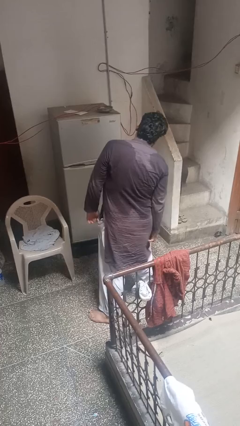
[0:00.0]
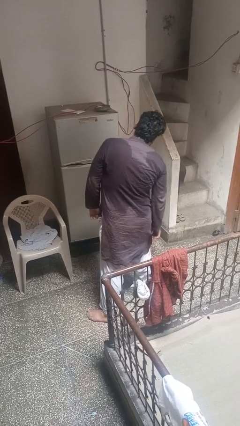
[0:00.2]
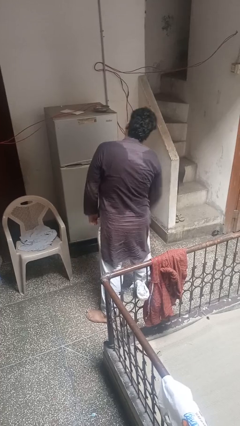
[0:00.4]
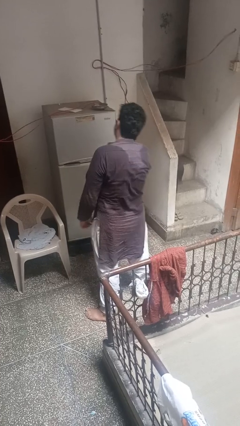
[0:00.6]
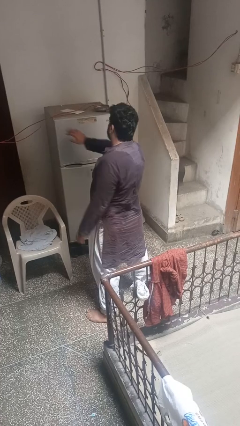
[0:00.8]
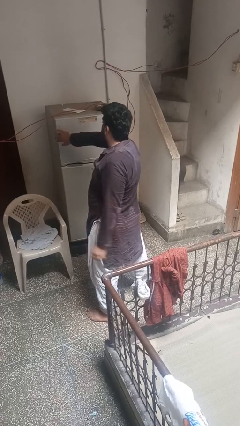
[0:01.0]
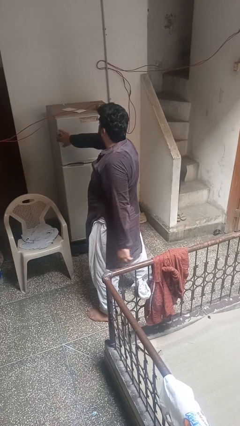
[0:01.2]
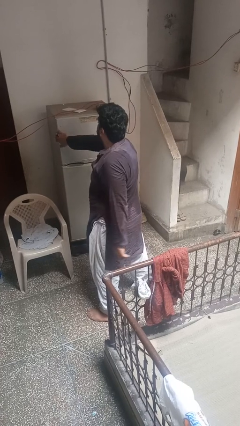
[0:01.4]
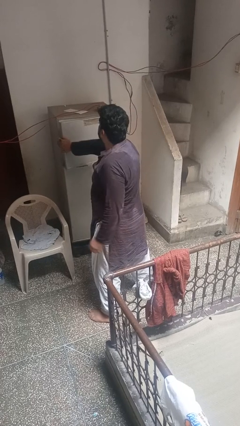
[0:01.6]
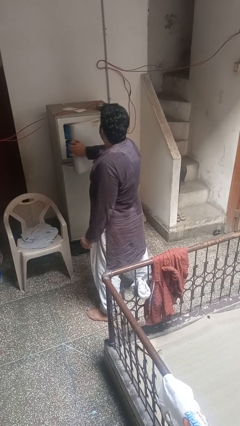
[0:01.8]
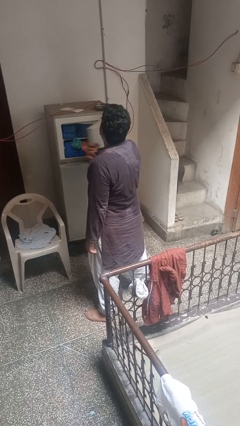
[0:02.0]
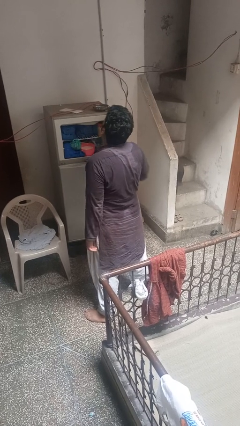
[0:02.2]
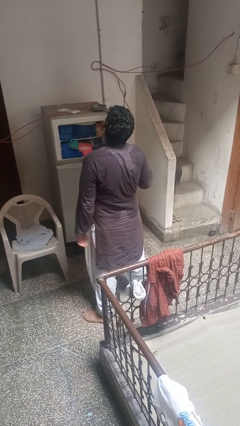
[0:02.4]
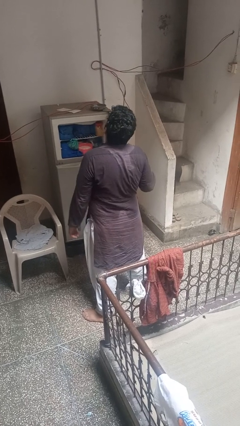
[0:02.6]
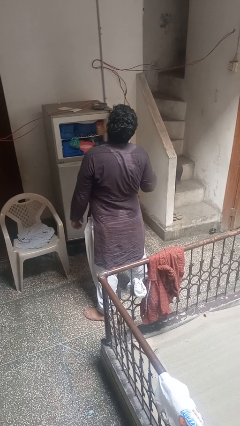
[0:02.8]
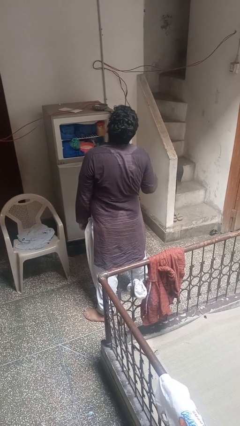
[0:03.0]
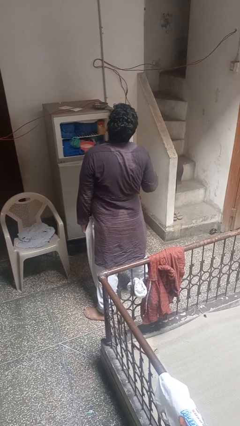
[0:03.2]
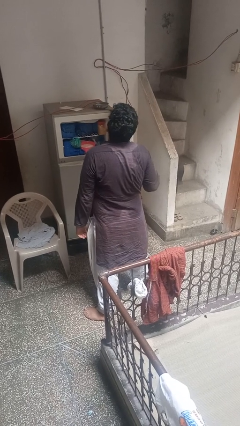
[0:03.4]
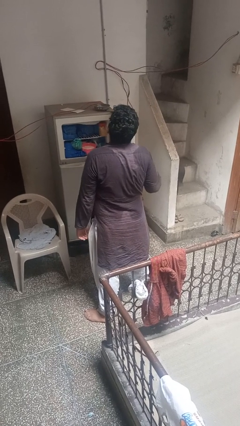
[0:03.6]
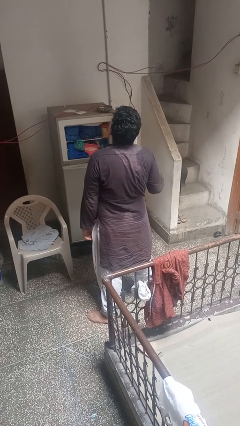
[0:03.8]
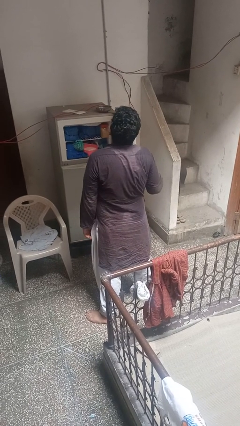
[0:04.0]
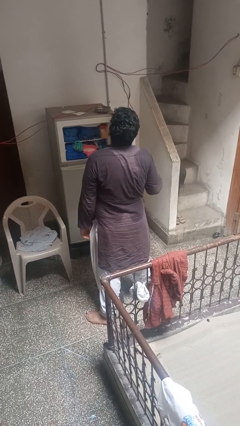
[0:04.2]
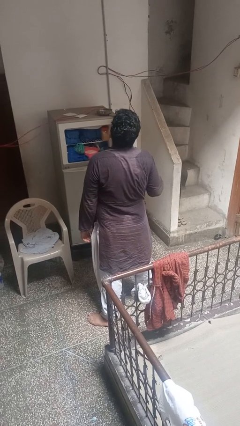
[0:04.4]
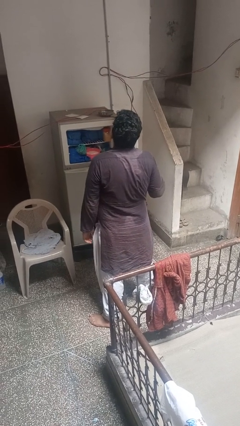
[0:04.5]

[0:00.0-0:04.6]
person opens refrigerator

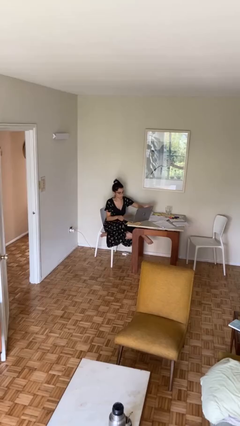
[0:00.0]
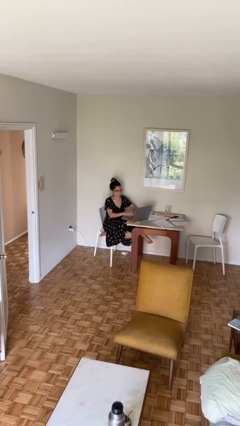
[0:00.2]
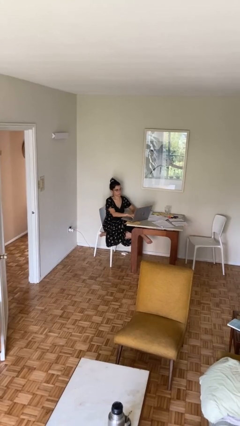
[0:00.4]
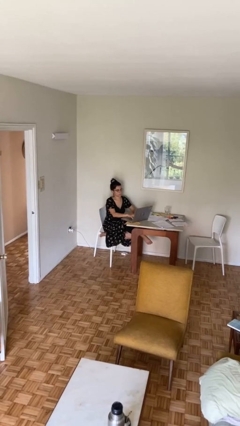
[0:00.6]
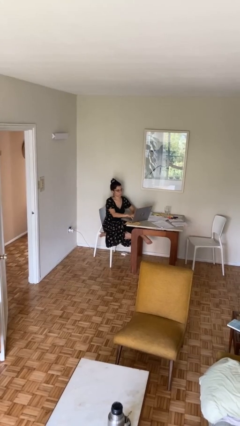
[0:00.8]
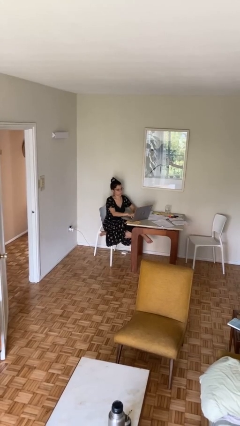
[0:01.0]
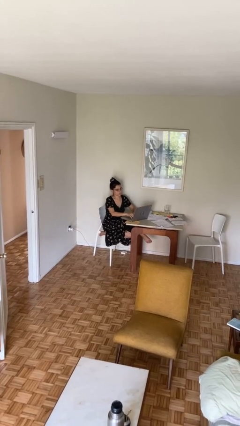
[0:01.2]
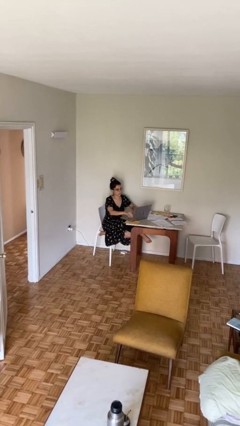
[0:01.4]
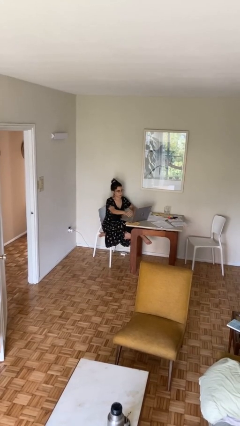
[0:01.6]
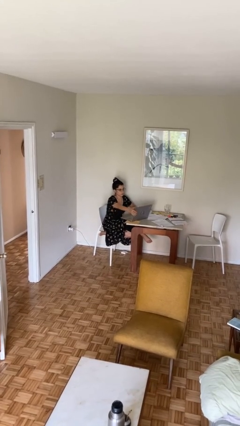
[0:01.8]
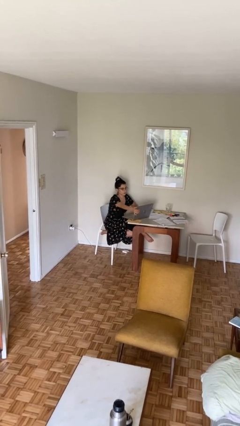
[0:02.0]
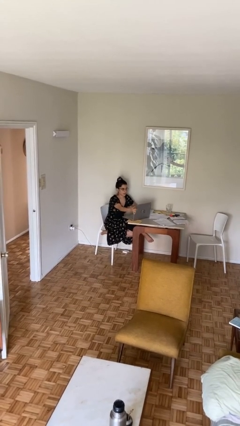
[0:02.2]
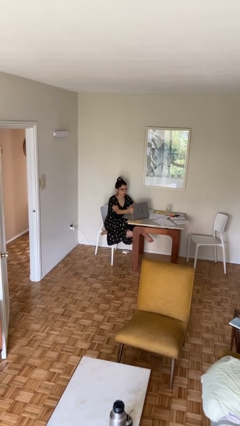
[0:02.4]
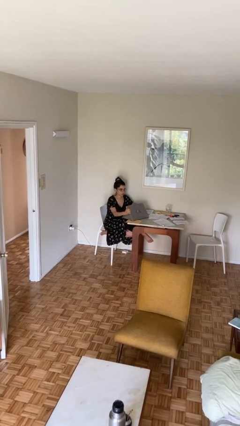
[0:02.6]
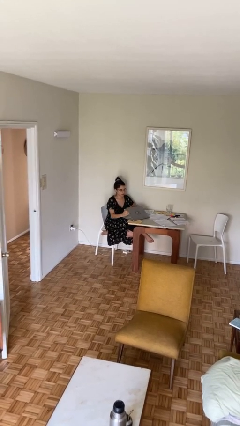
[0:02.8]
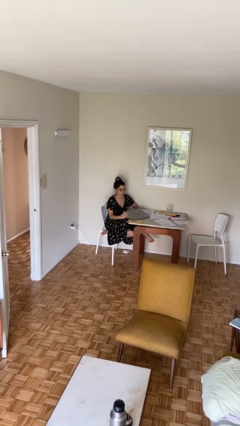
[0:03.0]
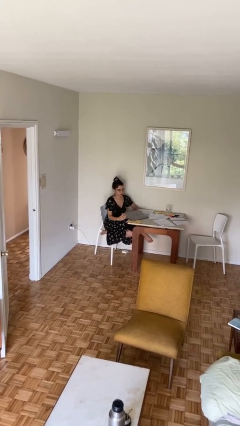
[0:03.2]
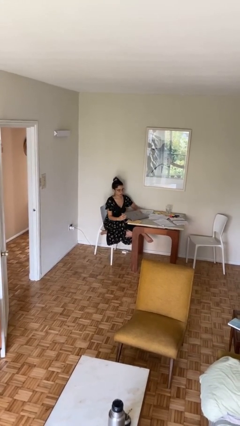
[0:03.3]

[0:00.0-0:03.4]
person interacts with laptop

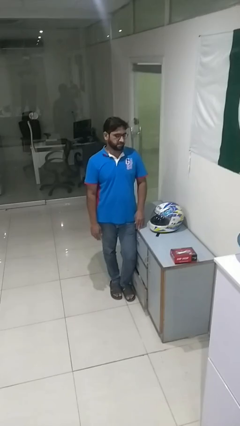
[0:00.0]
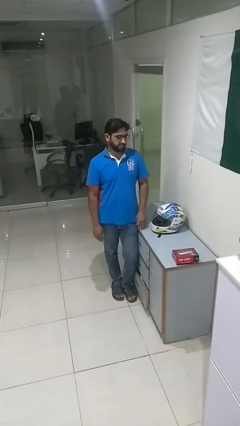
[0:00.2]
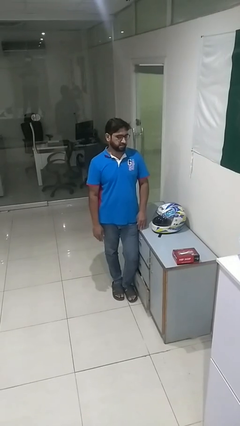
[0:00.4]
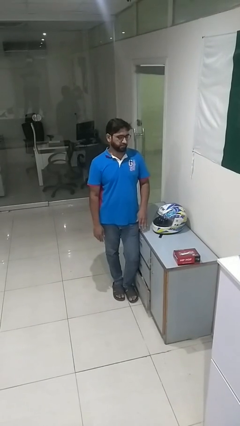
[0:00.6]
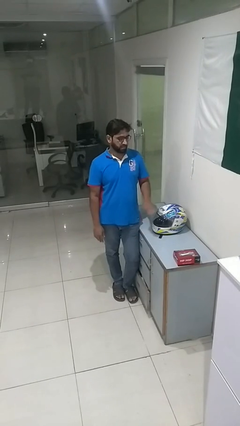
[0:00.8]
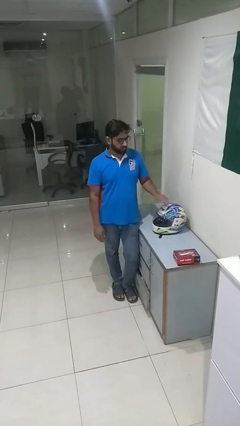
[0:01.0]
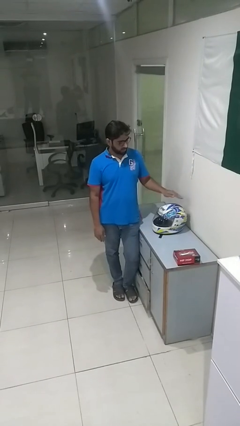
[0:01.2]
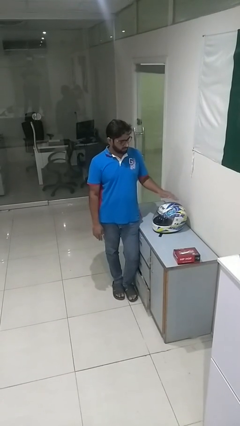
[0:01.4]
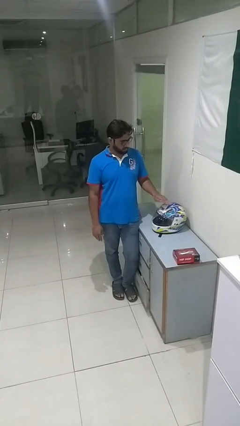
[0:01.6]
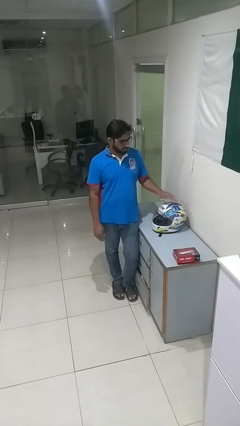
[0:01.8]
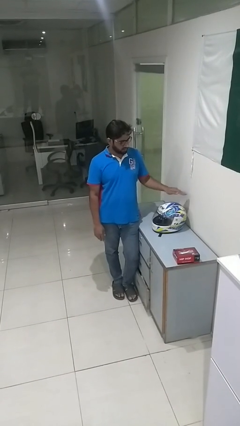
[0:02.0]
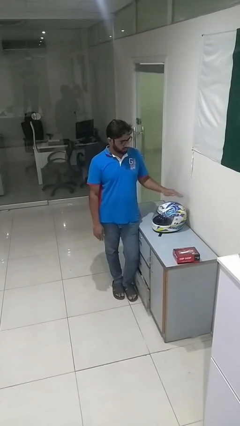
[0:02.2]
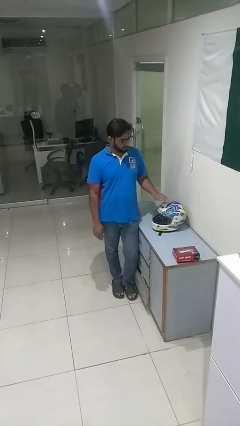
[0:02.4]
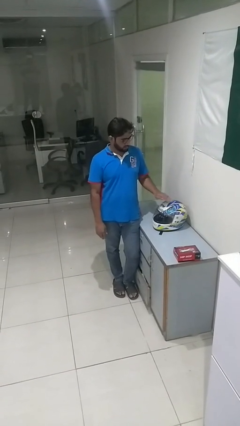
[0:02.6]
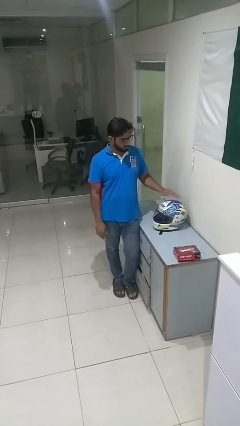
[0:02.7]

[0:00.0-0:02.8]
person waves hand over object

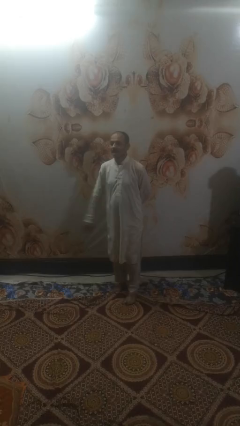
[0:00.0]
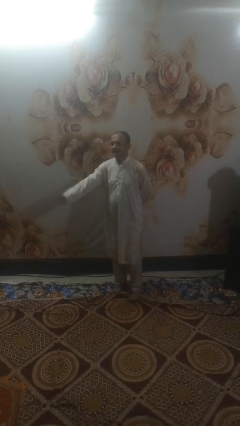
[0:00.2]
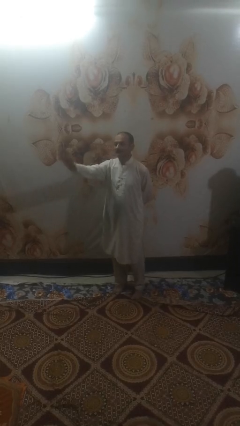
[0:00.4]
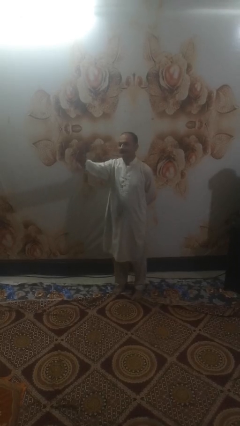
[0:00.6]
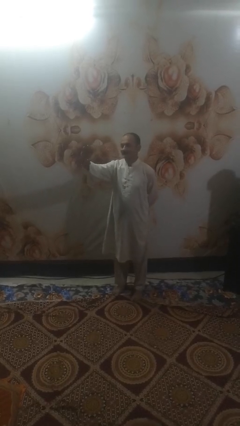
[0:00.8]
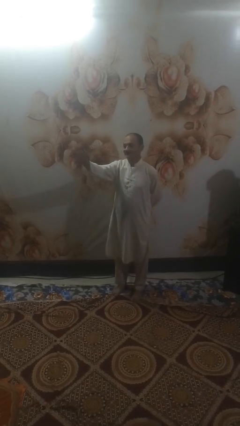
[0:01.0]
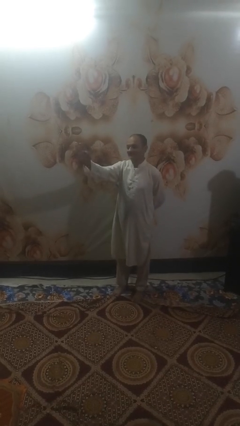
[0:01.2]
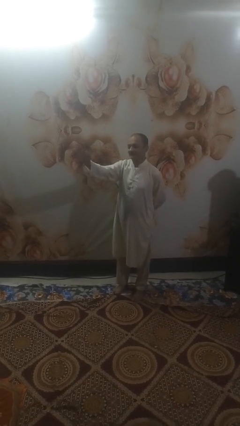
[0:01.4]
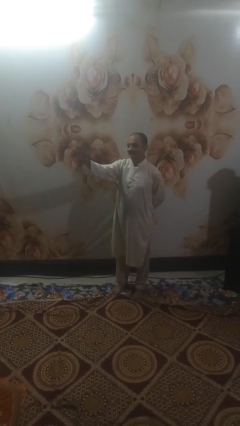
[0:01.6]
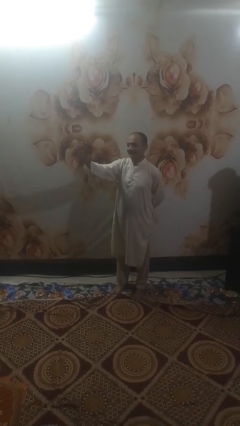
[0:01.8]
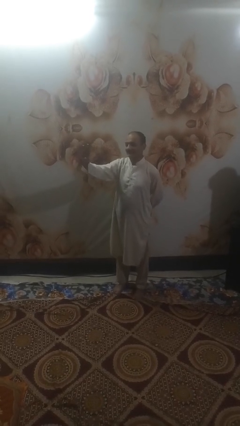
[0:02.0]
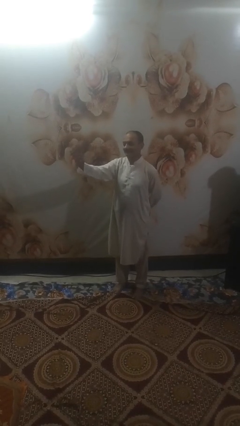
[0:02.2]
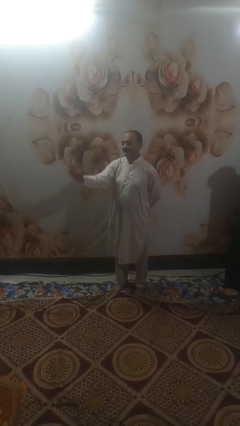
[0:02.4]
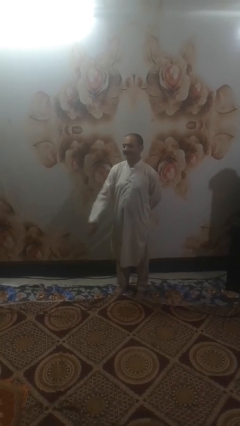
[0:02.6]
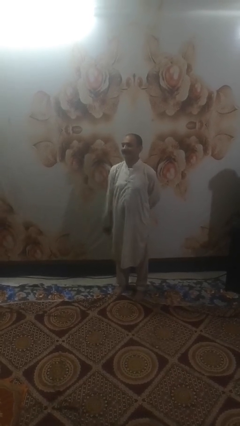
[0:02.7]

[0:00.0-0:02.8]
person waves at person

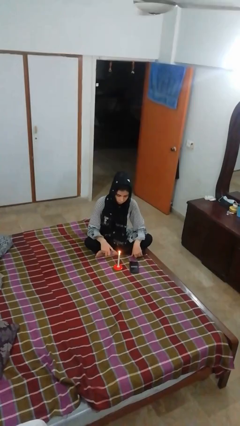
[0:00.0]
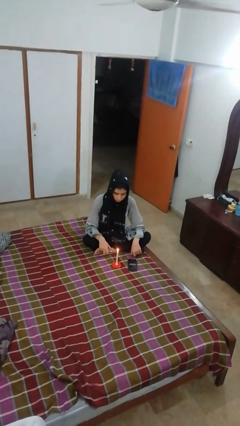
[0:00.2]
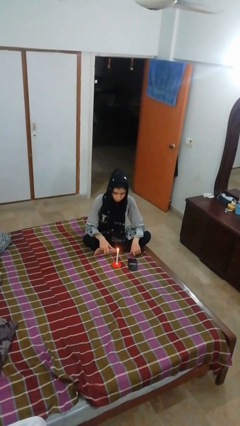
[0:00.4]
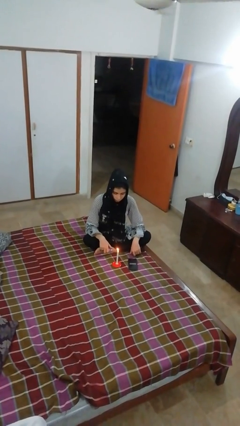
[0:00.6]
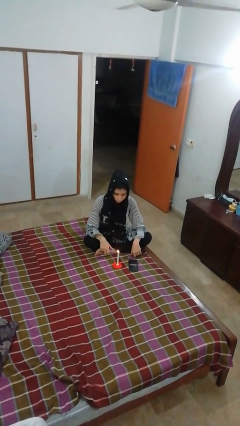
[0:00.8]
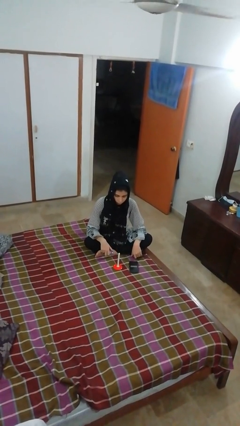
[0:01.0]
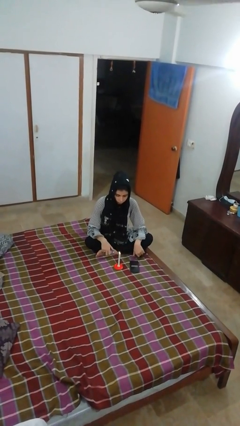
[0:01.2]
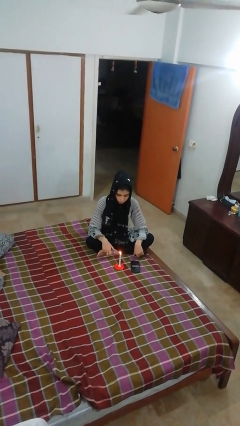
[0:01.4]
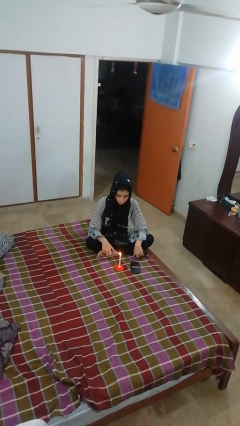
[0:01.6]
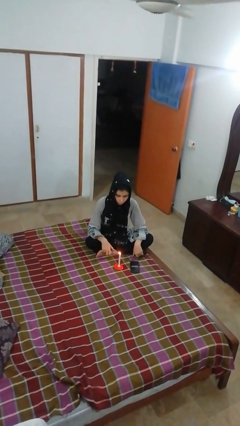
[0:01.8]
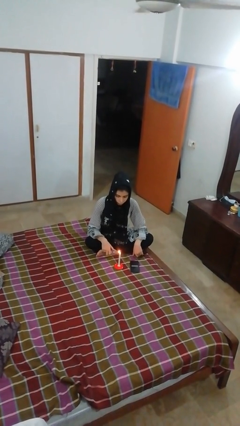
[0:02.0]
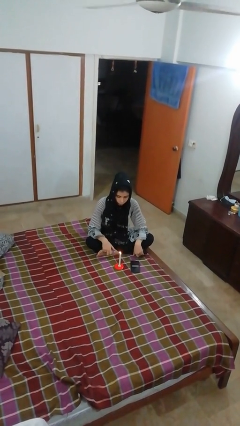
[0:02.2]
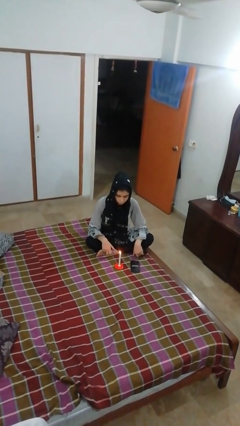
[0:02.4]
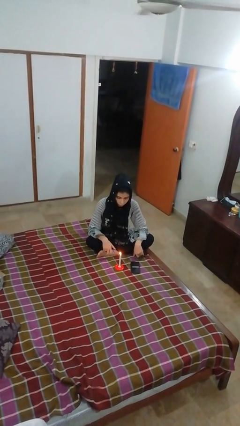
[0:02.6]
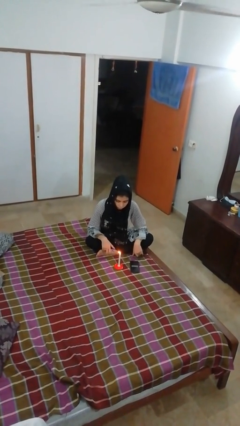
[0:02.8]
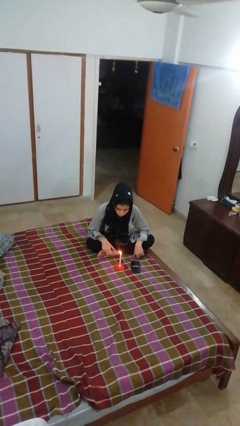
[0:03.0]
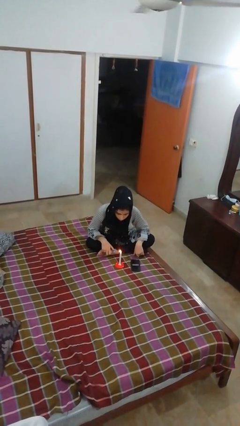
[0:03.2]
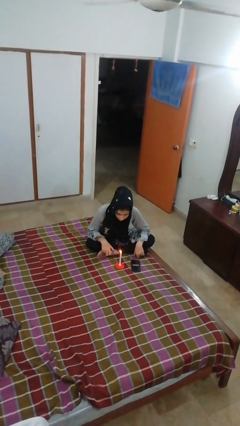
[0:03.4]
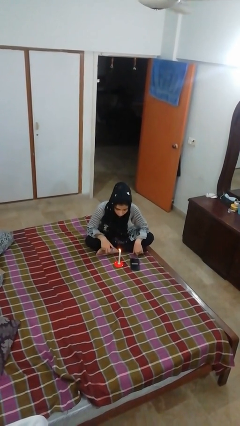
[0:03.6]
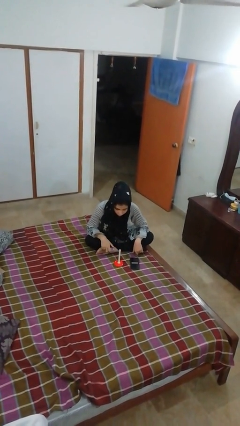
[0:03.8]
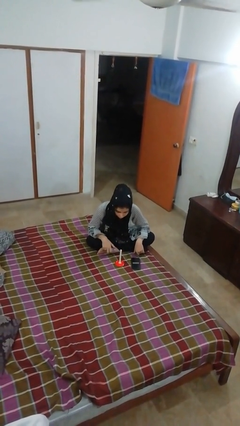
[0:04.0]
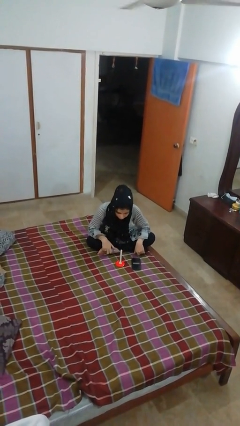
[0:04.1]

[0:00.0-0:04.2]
person extinguishes candle

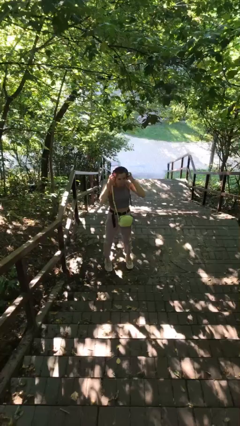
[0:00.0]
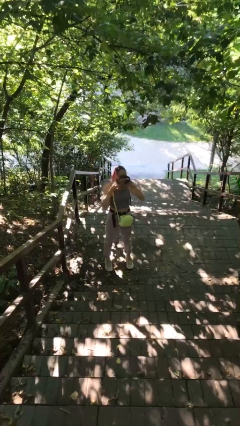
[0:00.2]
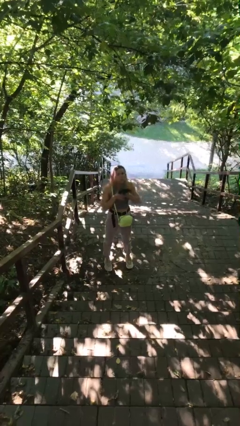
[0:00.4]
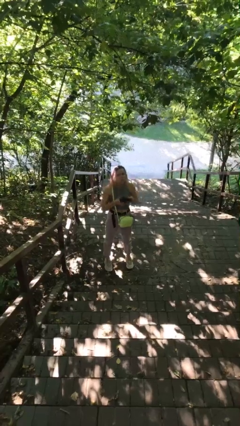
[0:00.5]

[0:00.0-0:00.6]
person takes off headphones
